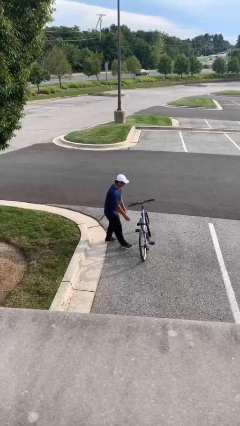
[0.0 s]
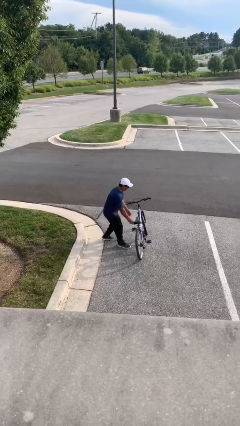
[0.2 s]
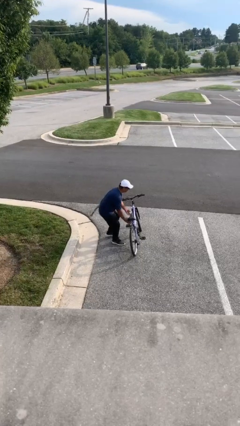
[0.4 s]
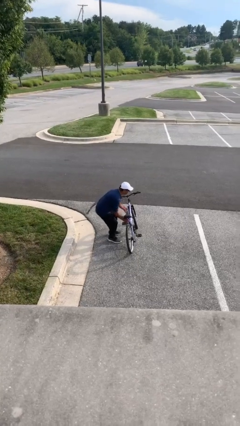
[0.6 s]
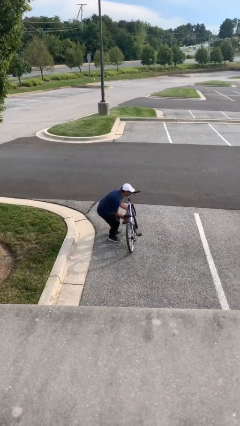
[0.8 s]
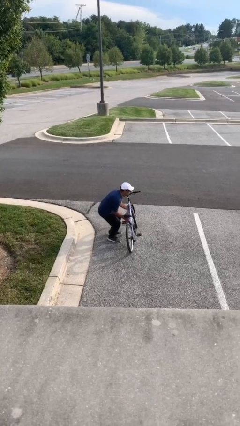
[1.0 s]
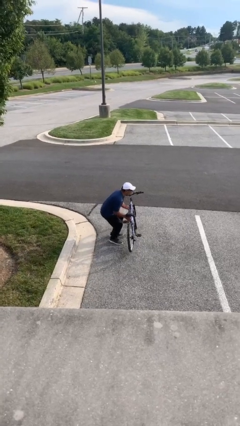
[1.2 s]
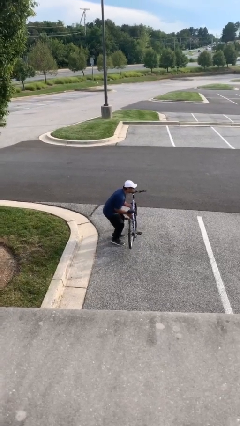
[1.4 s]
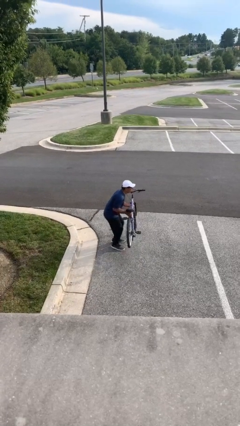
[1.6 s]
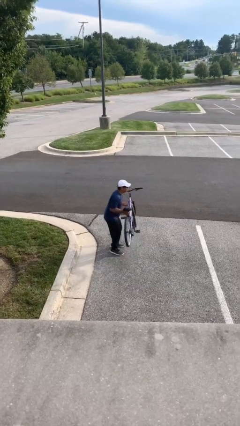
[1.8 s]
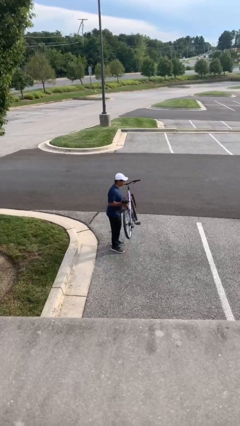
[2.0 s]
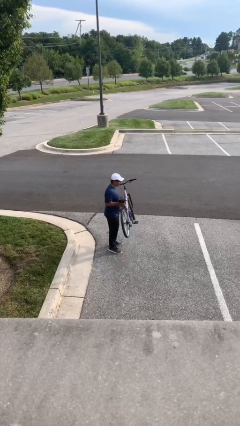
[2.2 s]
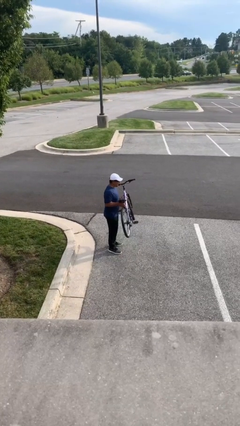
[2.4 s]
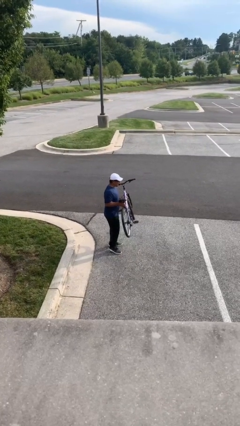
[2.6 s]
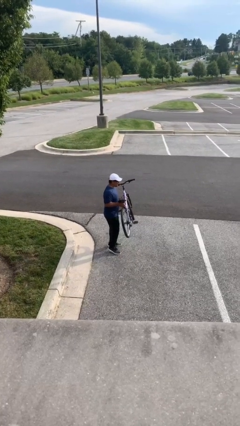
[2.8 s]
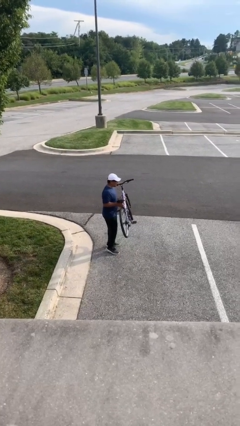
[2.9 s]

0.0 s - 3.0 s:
person picks up object from floor

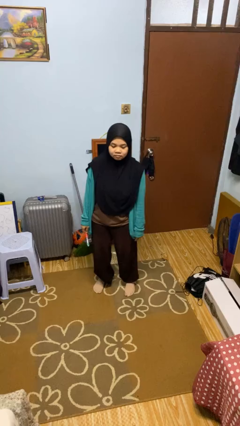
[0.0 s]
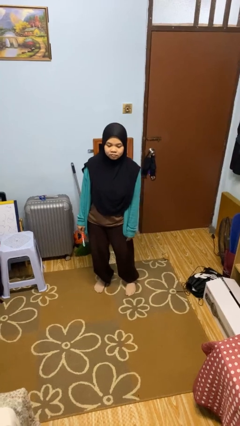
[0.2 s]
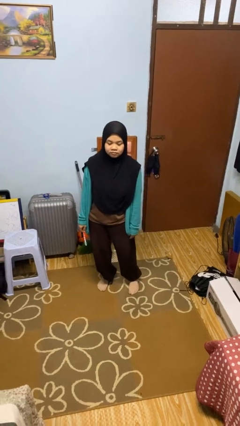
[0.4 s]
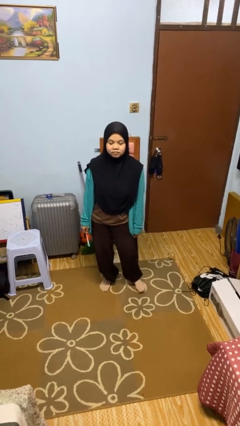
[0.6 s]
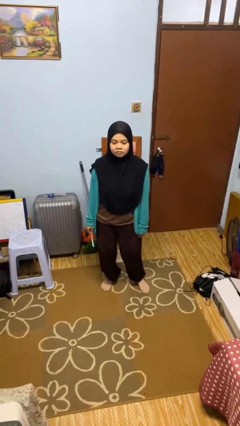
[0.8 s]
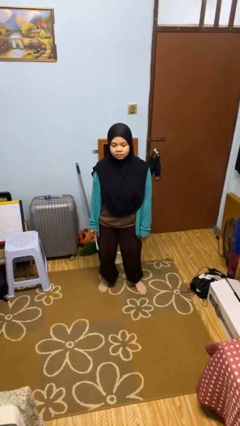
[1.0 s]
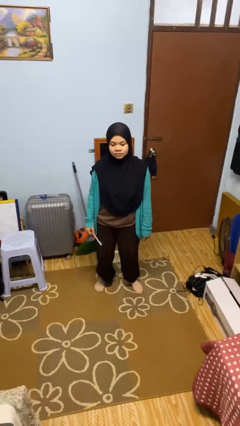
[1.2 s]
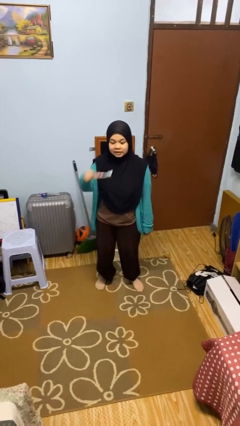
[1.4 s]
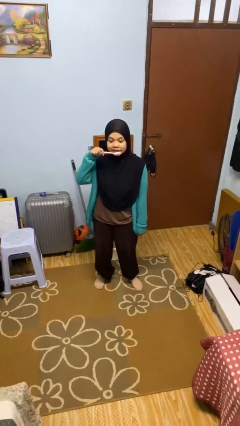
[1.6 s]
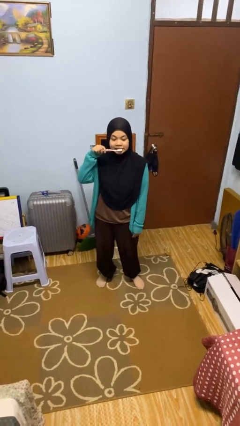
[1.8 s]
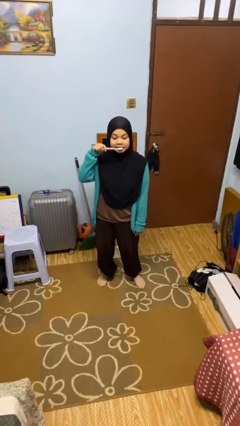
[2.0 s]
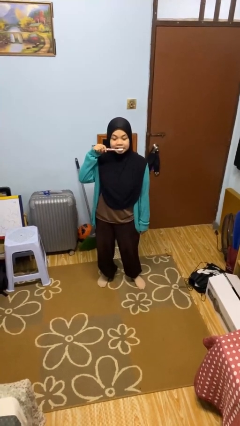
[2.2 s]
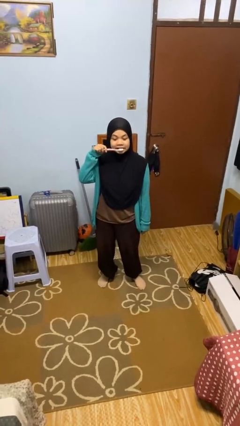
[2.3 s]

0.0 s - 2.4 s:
person brushes teeth

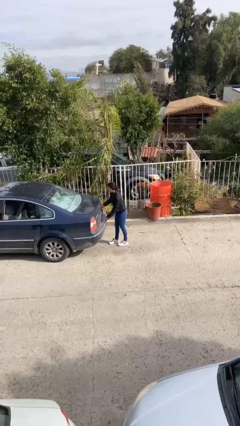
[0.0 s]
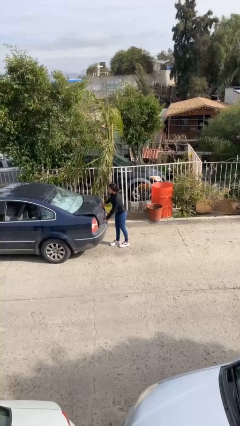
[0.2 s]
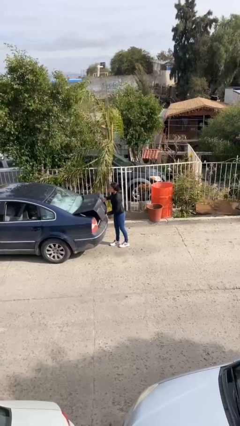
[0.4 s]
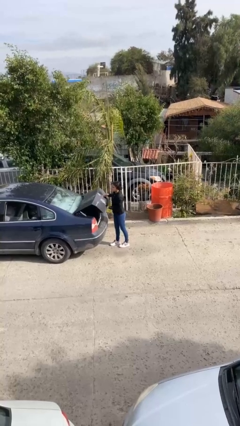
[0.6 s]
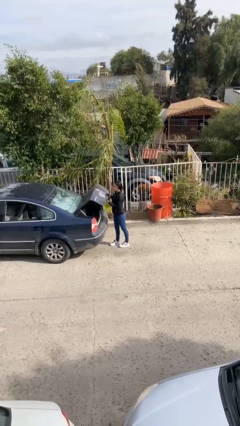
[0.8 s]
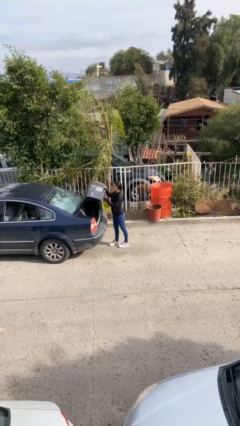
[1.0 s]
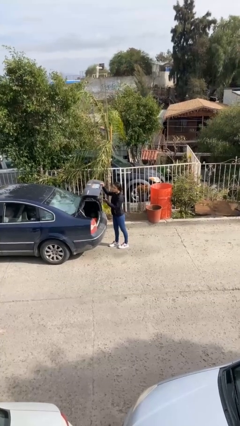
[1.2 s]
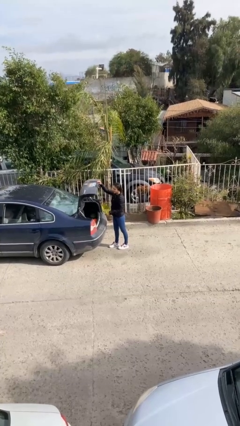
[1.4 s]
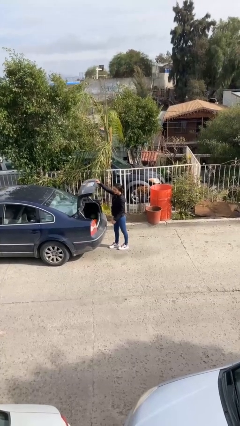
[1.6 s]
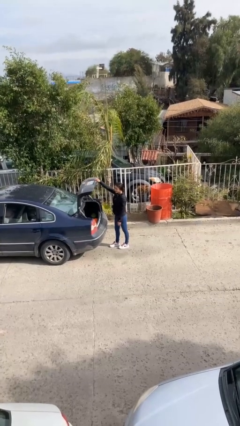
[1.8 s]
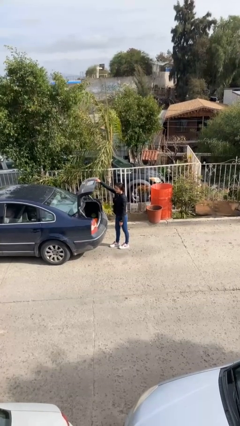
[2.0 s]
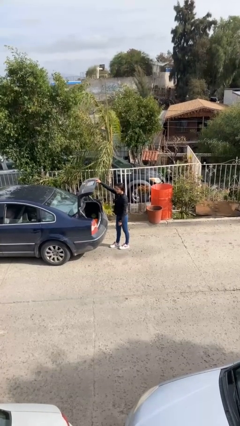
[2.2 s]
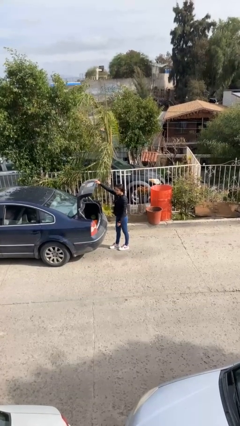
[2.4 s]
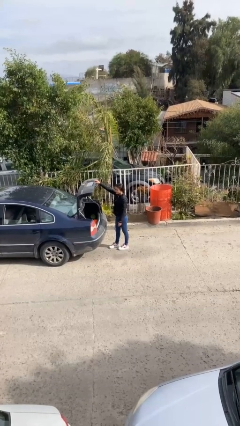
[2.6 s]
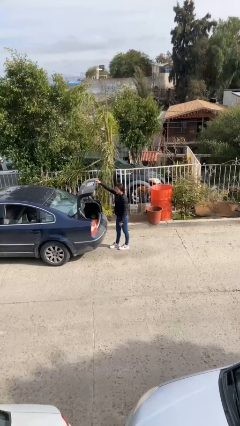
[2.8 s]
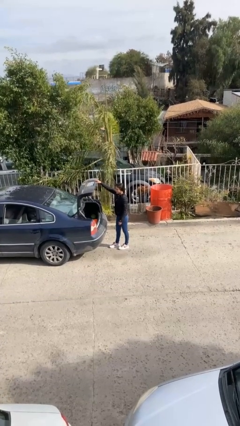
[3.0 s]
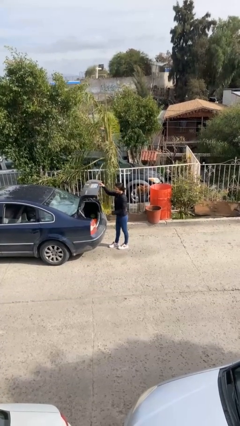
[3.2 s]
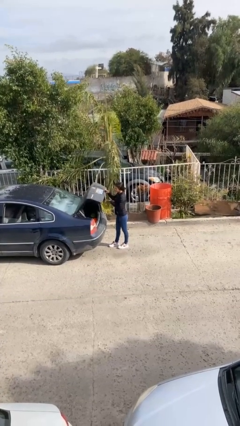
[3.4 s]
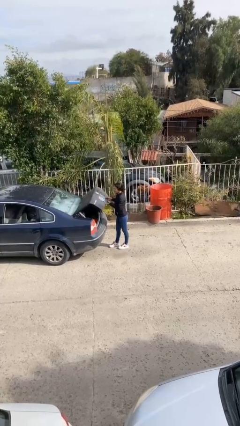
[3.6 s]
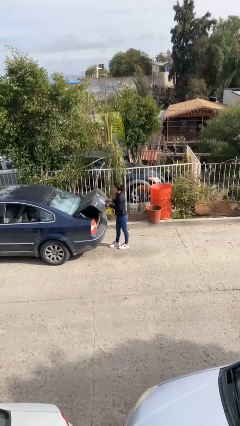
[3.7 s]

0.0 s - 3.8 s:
person opens car trunk

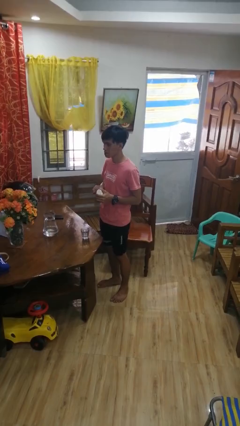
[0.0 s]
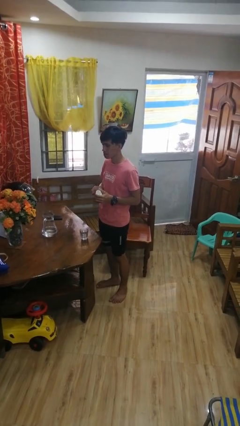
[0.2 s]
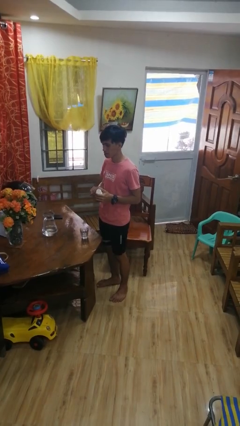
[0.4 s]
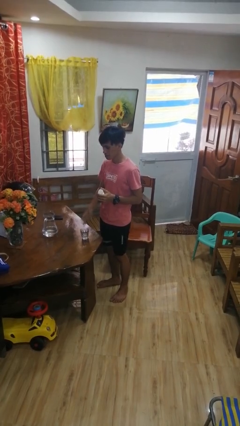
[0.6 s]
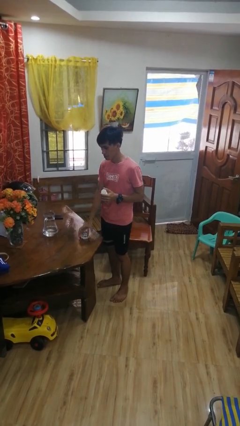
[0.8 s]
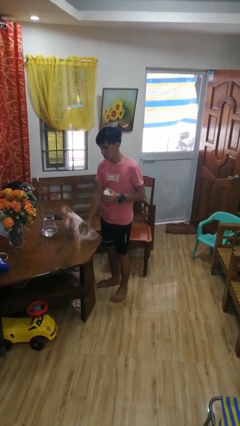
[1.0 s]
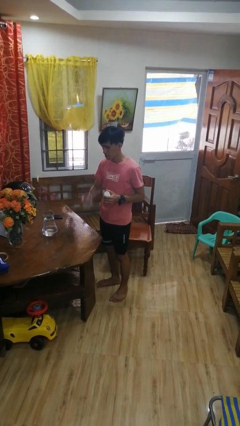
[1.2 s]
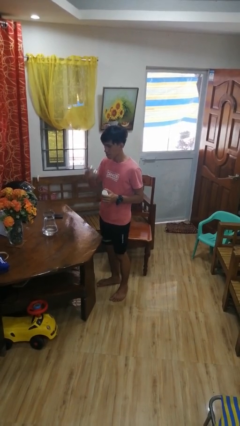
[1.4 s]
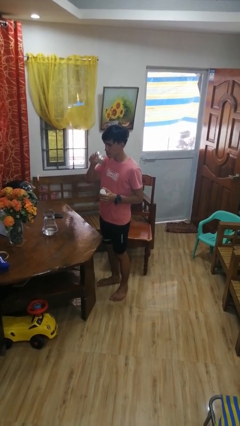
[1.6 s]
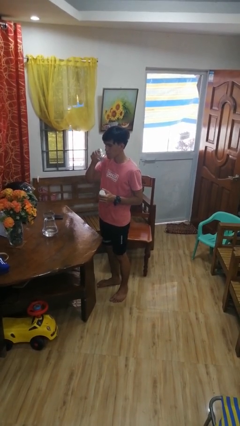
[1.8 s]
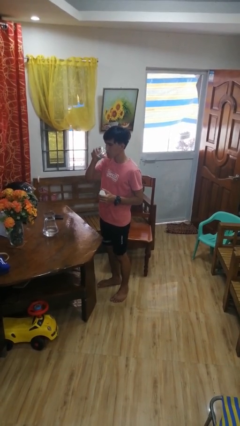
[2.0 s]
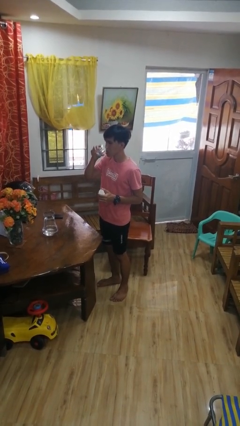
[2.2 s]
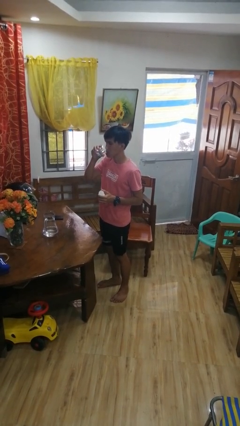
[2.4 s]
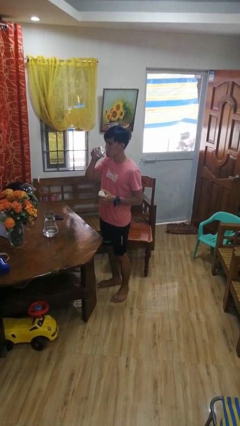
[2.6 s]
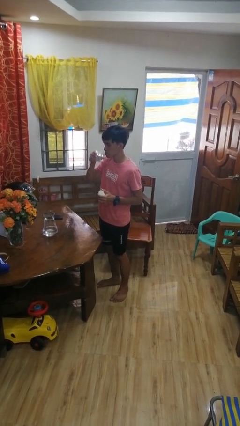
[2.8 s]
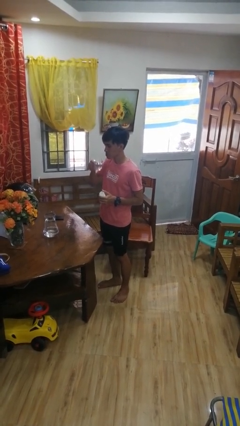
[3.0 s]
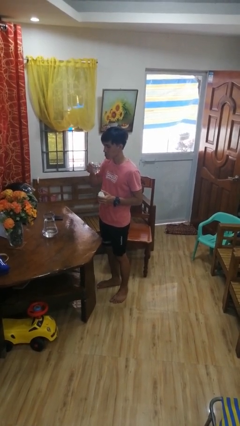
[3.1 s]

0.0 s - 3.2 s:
person drinks from cup

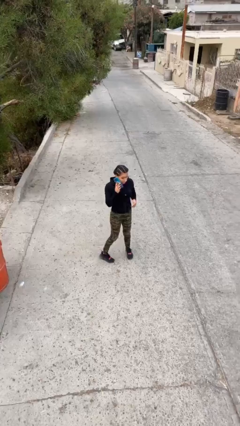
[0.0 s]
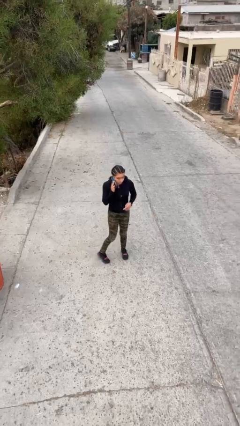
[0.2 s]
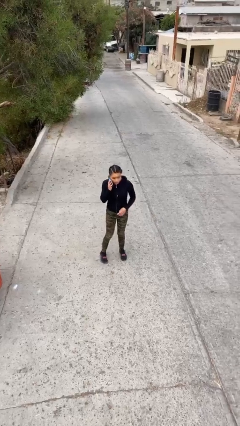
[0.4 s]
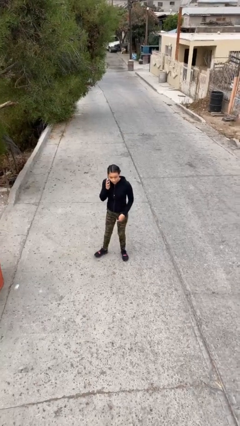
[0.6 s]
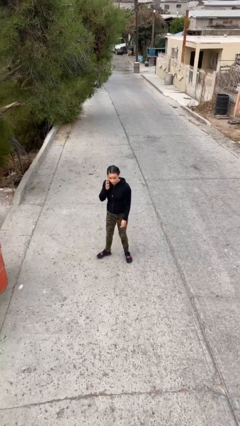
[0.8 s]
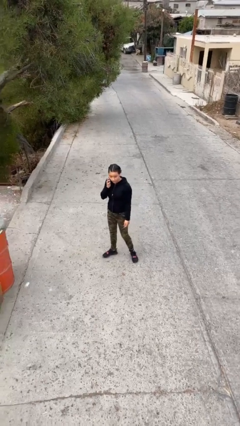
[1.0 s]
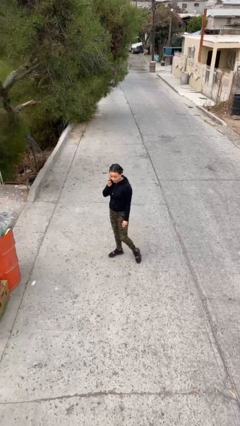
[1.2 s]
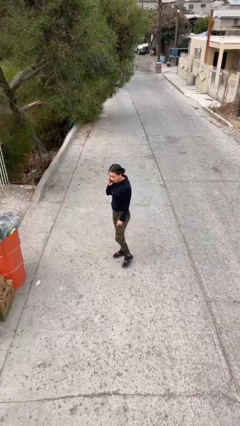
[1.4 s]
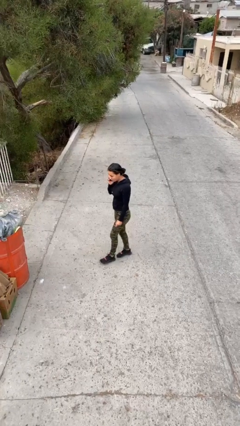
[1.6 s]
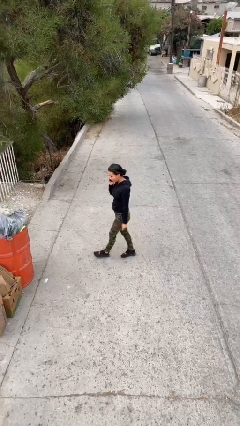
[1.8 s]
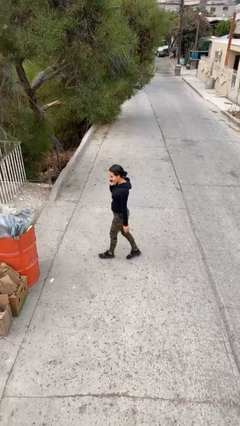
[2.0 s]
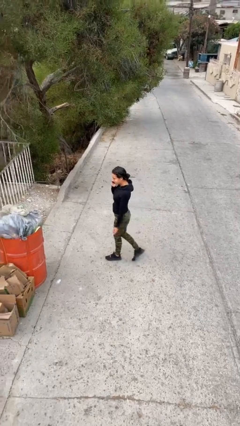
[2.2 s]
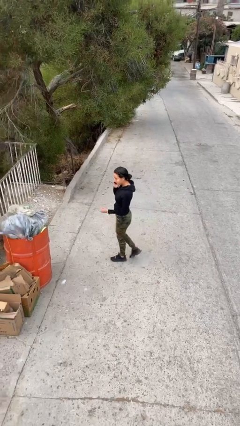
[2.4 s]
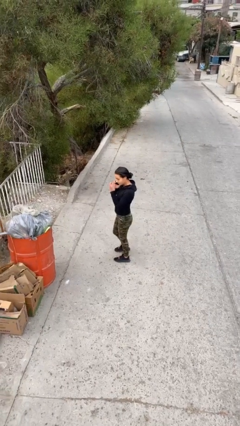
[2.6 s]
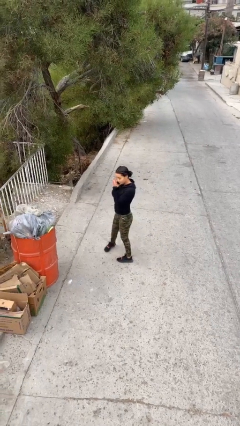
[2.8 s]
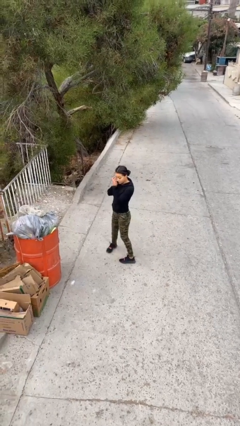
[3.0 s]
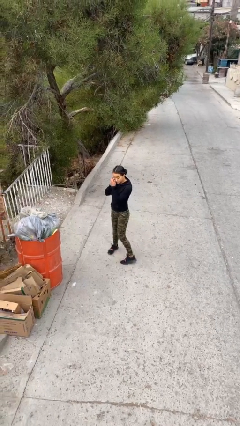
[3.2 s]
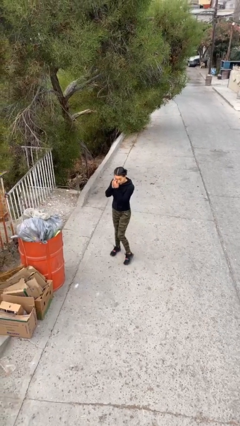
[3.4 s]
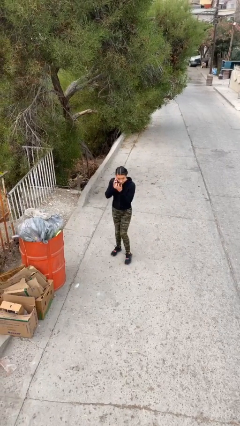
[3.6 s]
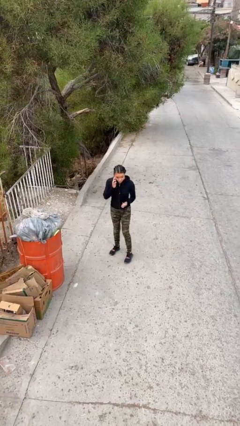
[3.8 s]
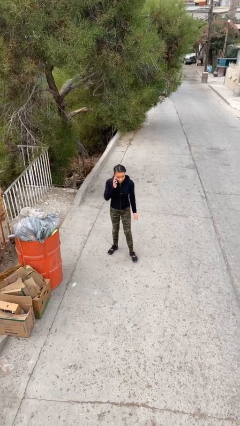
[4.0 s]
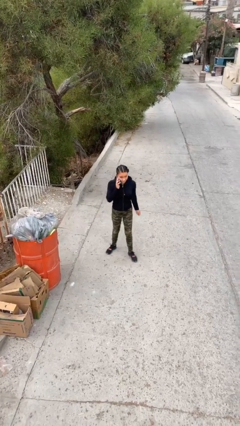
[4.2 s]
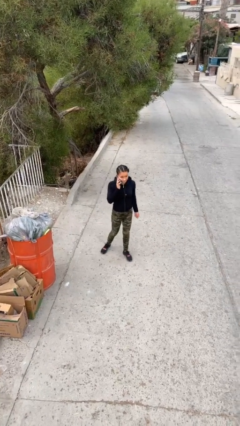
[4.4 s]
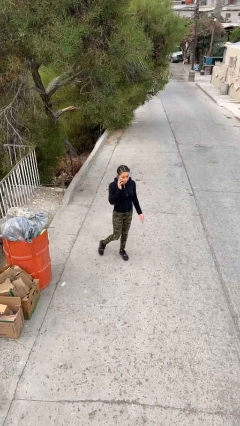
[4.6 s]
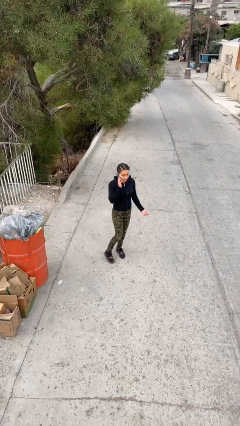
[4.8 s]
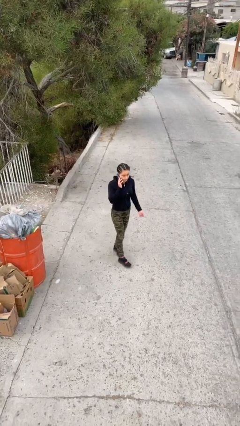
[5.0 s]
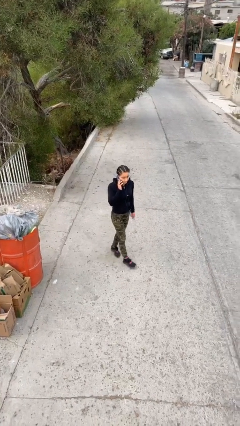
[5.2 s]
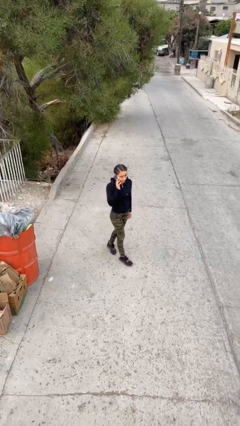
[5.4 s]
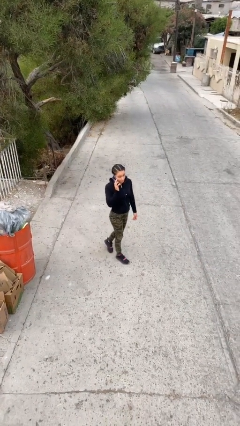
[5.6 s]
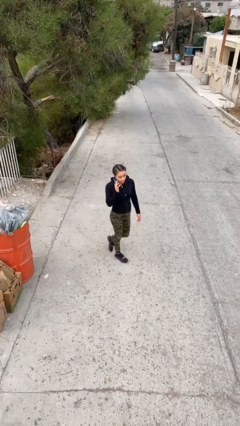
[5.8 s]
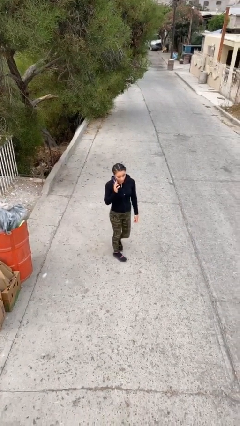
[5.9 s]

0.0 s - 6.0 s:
person talks on phone
